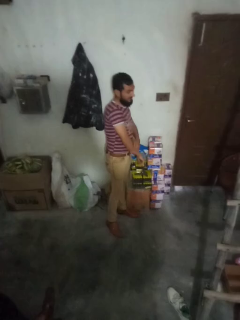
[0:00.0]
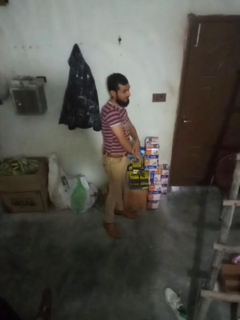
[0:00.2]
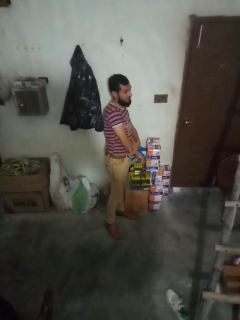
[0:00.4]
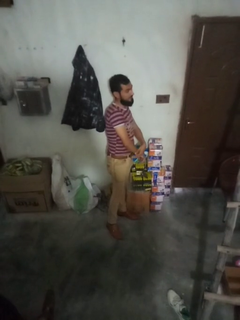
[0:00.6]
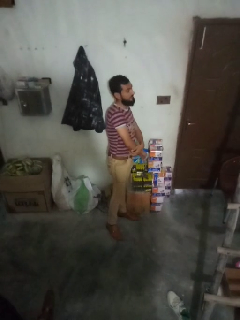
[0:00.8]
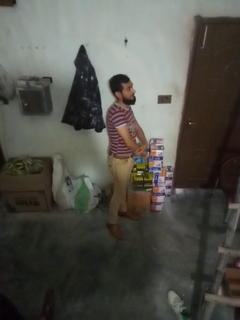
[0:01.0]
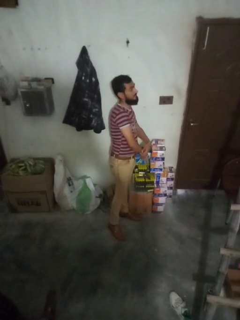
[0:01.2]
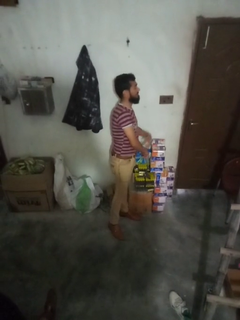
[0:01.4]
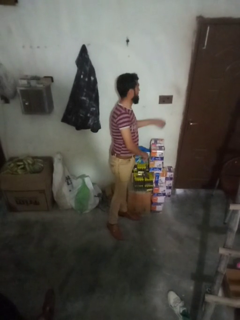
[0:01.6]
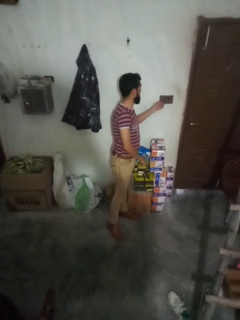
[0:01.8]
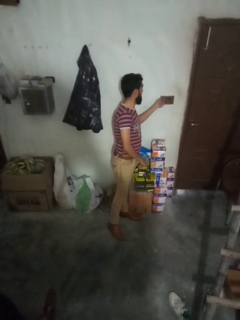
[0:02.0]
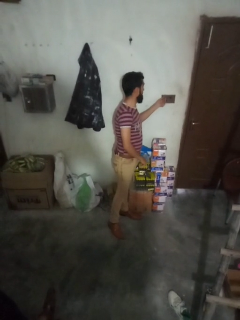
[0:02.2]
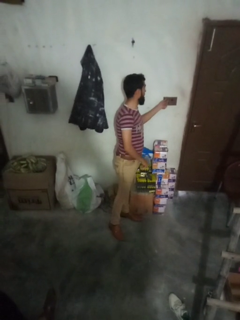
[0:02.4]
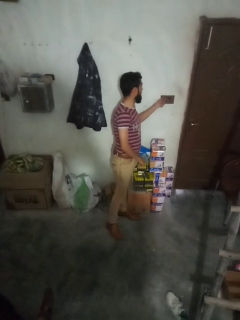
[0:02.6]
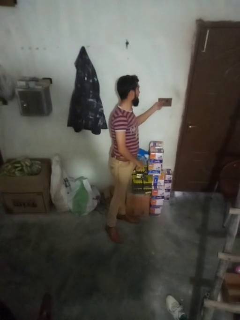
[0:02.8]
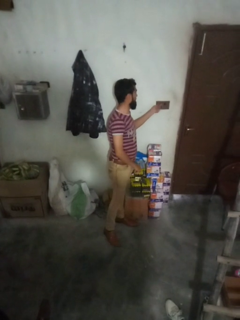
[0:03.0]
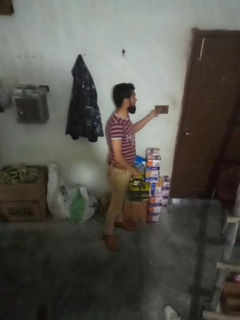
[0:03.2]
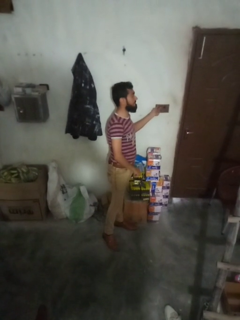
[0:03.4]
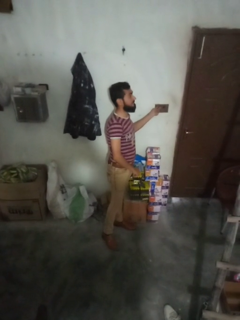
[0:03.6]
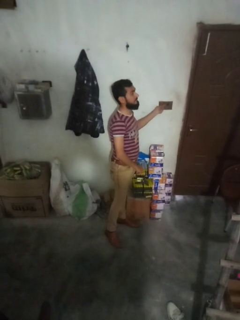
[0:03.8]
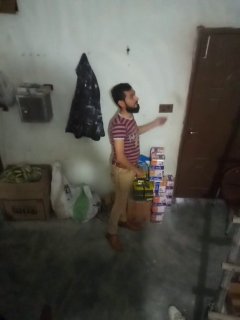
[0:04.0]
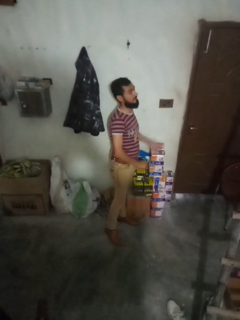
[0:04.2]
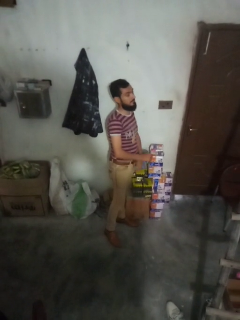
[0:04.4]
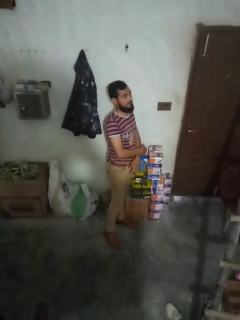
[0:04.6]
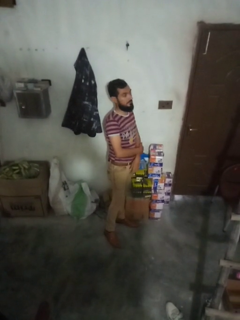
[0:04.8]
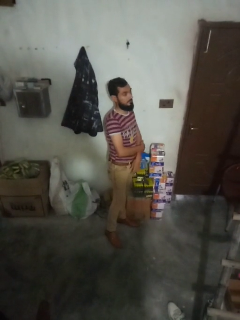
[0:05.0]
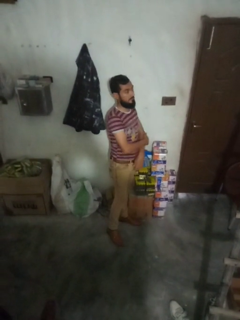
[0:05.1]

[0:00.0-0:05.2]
person adjusts thermostat

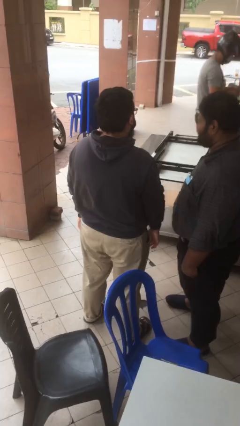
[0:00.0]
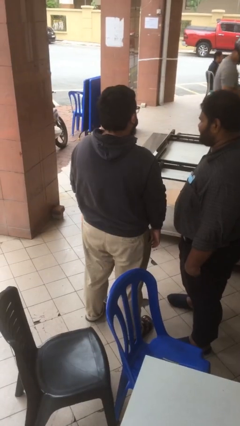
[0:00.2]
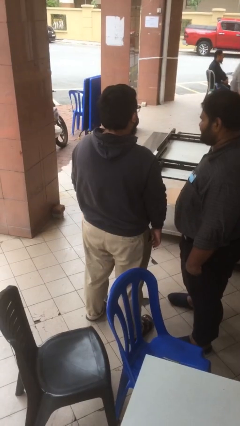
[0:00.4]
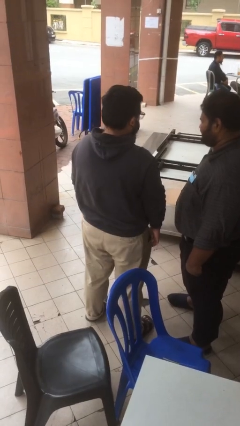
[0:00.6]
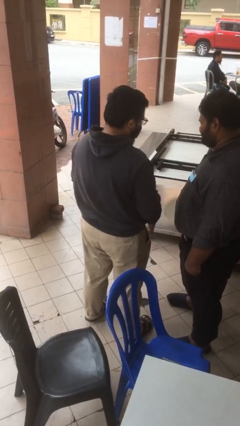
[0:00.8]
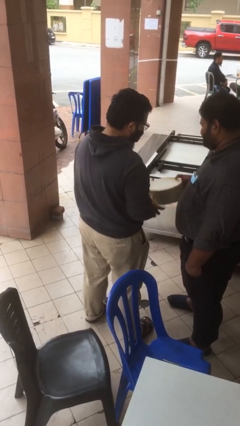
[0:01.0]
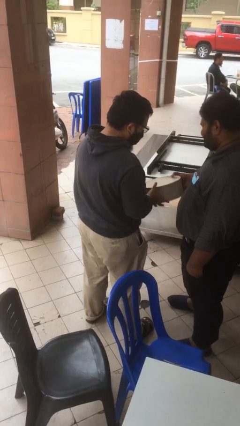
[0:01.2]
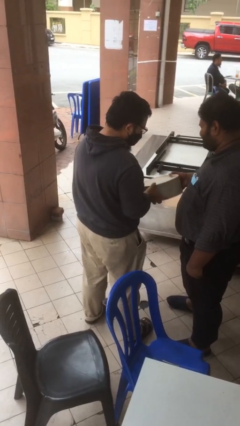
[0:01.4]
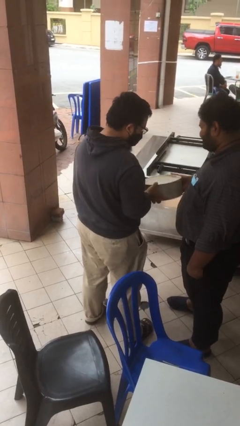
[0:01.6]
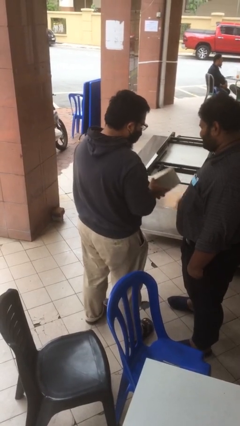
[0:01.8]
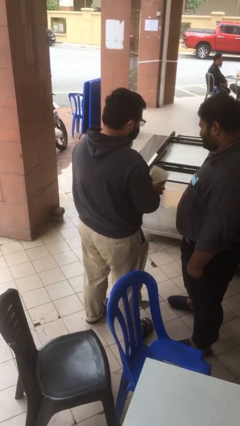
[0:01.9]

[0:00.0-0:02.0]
person transfers object to person

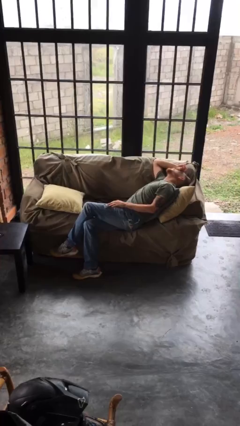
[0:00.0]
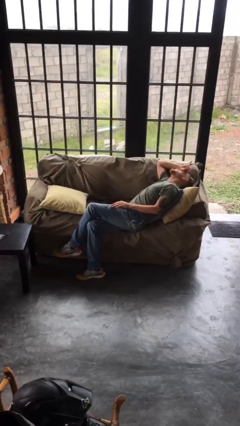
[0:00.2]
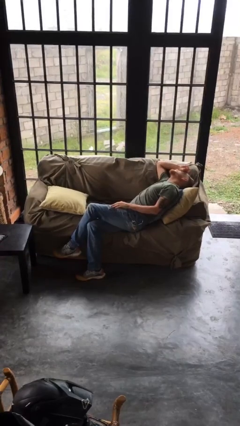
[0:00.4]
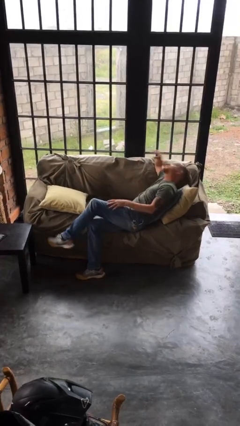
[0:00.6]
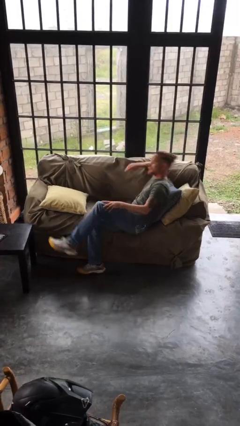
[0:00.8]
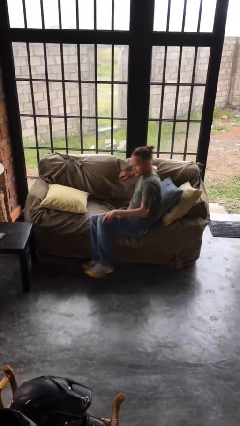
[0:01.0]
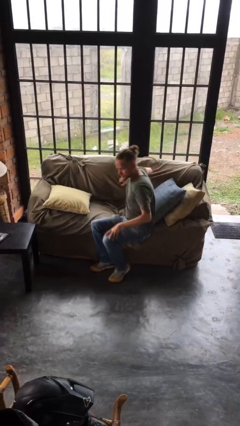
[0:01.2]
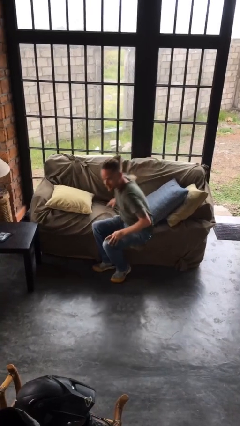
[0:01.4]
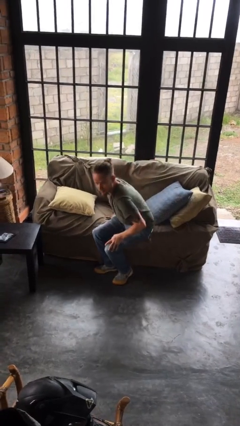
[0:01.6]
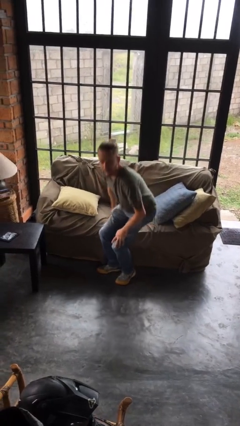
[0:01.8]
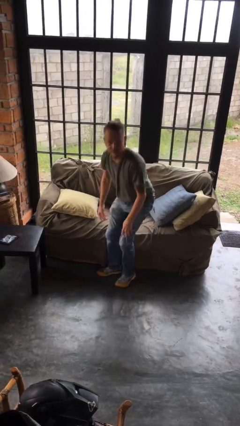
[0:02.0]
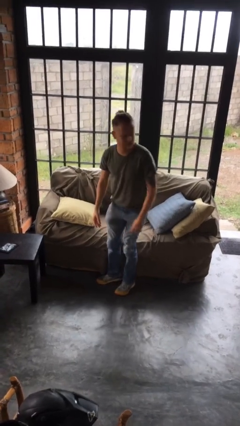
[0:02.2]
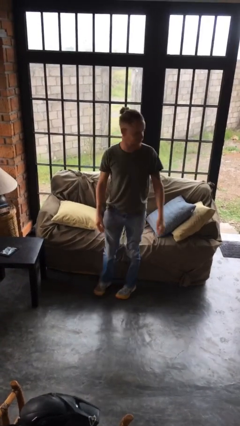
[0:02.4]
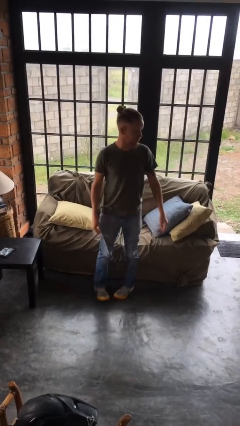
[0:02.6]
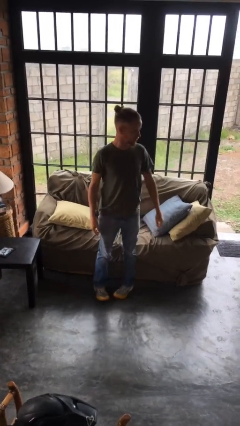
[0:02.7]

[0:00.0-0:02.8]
person stands up

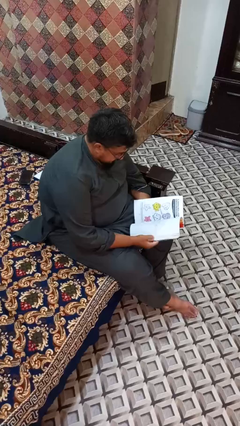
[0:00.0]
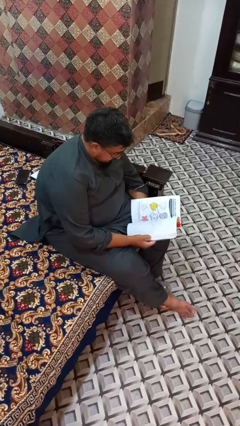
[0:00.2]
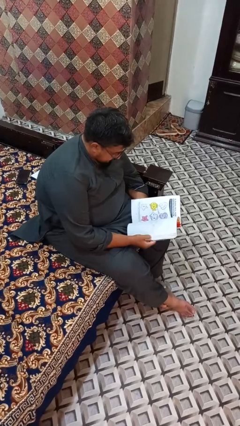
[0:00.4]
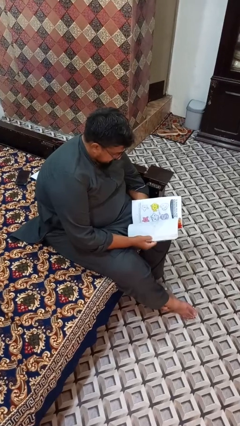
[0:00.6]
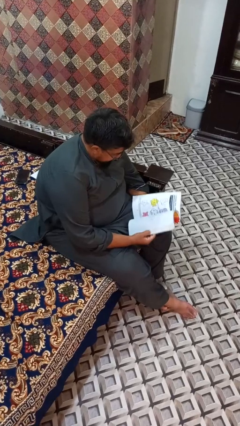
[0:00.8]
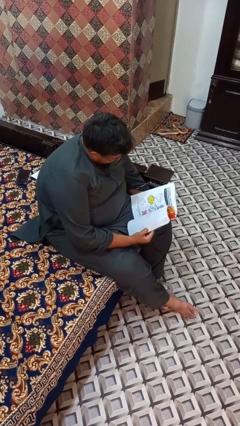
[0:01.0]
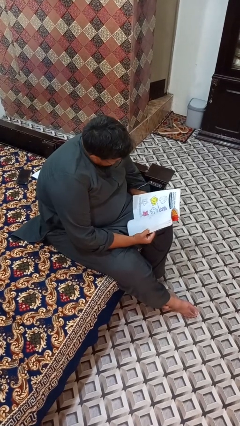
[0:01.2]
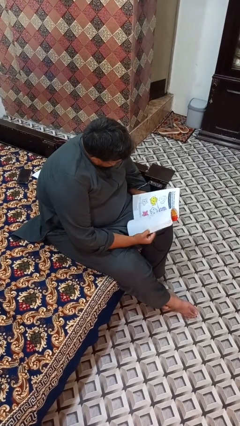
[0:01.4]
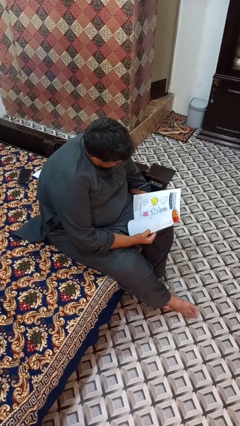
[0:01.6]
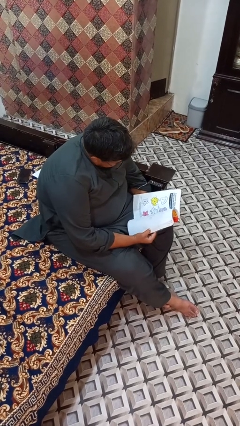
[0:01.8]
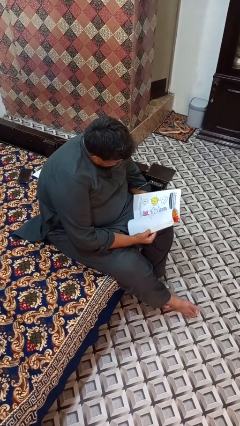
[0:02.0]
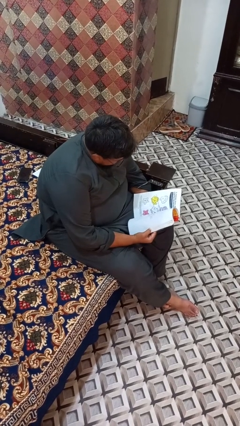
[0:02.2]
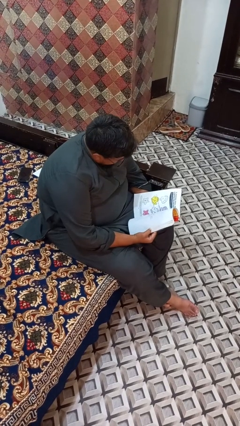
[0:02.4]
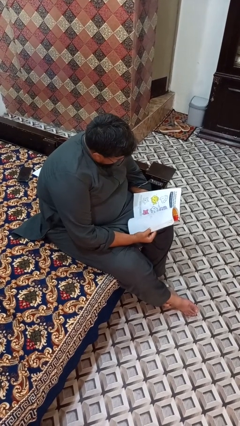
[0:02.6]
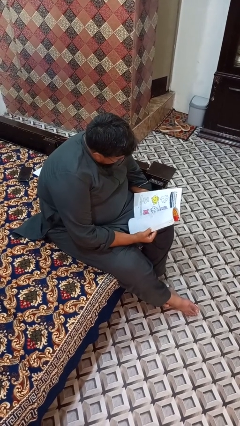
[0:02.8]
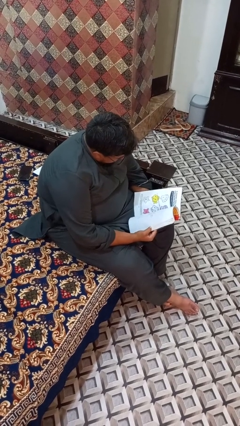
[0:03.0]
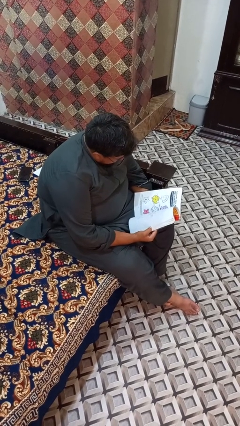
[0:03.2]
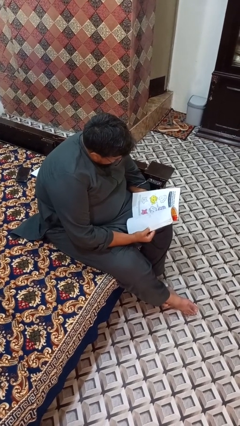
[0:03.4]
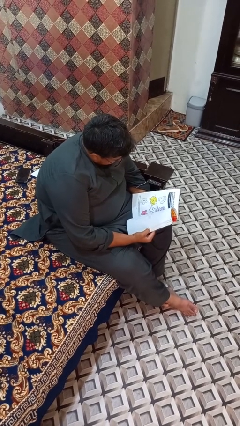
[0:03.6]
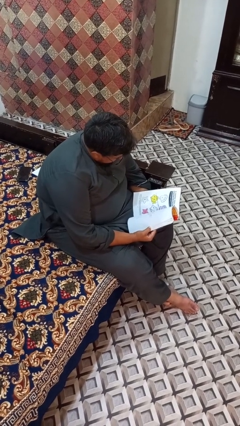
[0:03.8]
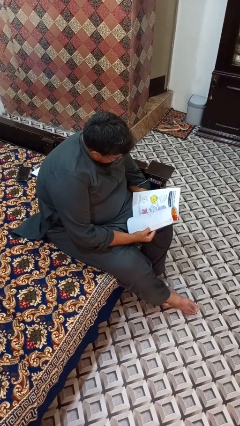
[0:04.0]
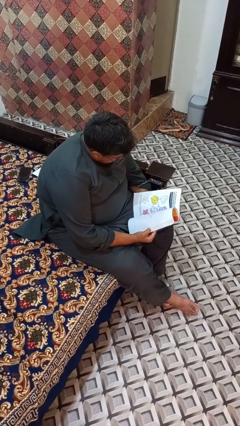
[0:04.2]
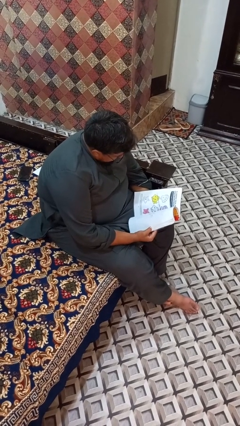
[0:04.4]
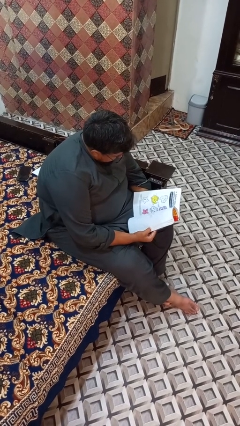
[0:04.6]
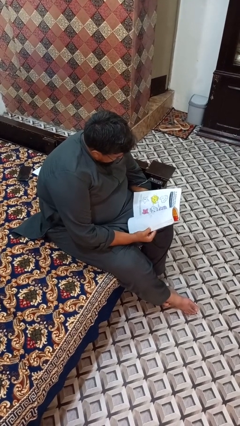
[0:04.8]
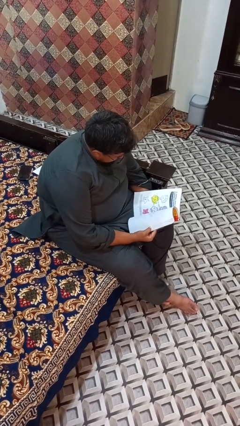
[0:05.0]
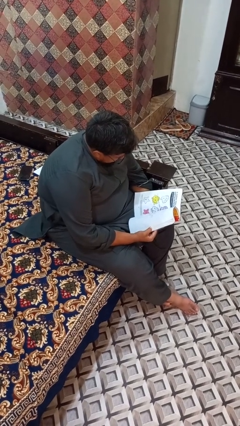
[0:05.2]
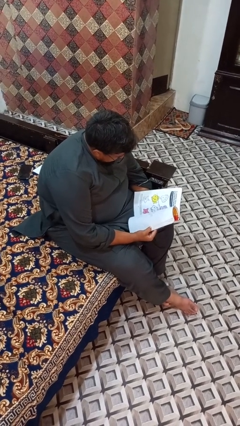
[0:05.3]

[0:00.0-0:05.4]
person reads book

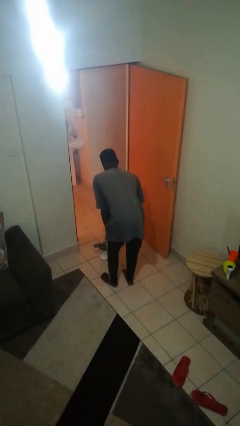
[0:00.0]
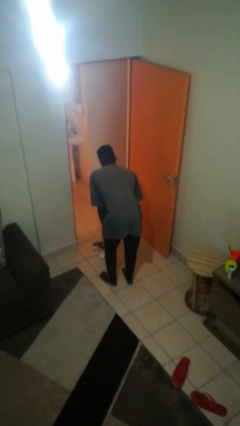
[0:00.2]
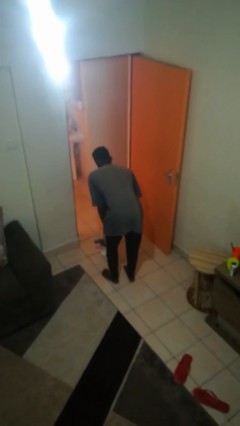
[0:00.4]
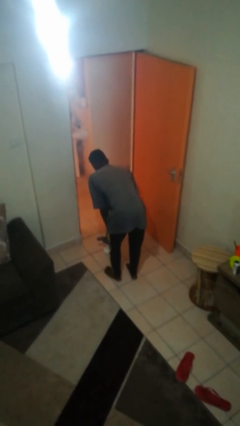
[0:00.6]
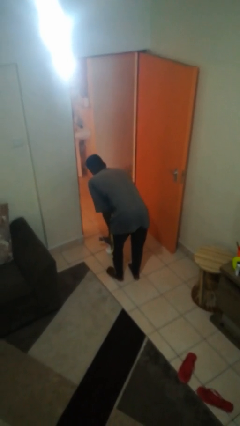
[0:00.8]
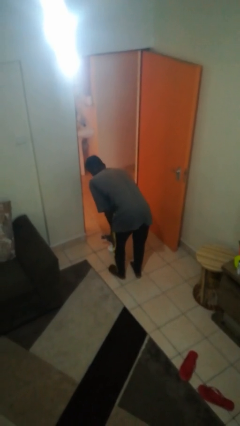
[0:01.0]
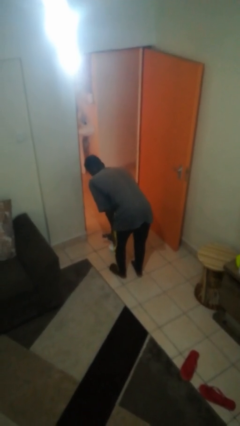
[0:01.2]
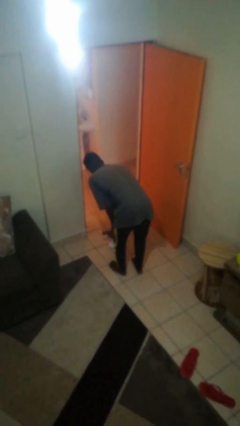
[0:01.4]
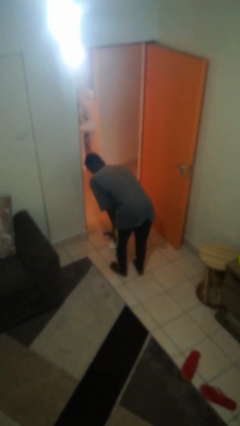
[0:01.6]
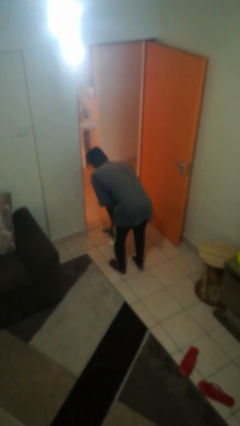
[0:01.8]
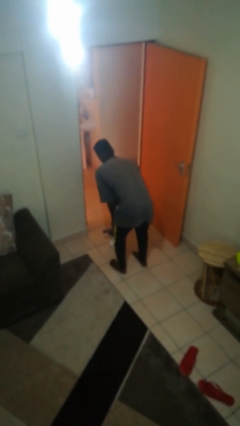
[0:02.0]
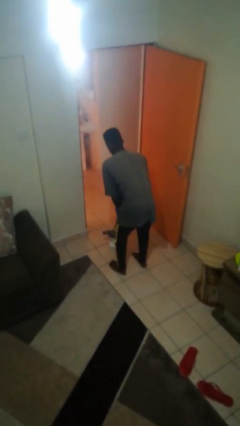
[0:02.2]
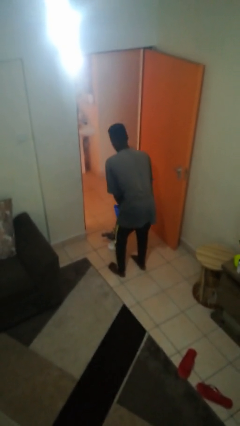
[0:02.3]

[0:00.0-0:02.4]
person waters houseplant

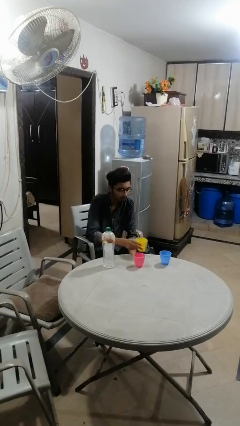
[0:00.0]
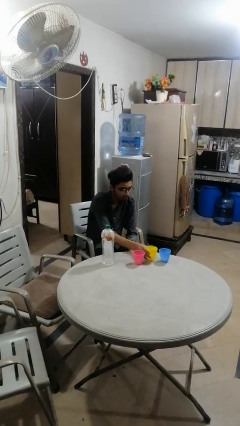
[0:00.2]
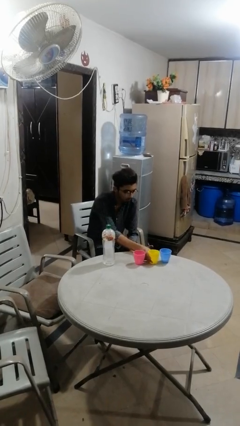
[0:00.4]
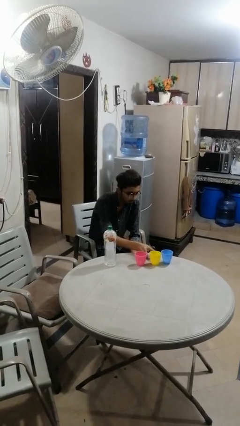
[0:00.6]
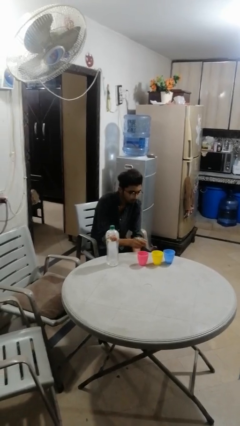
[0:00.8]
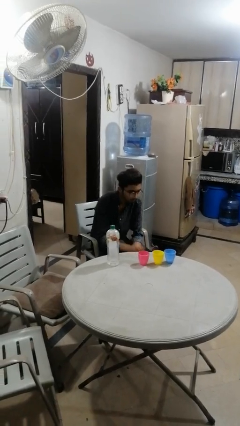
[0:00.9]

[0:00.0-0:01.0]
person puts down object on table
